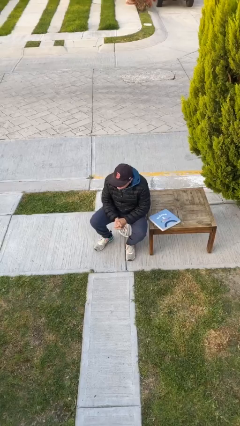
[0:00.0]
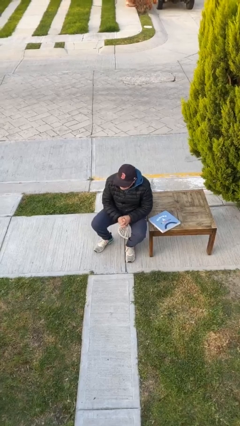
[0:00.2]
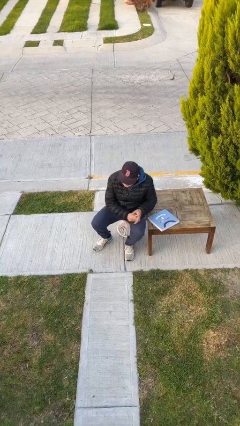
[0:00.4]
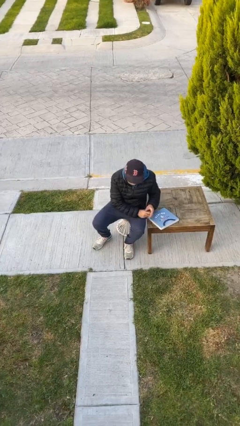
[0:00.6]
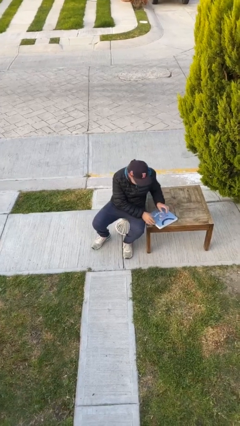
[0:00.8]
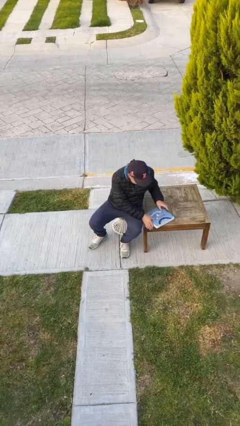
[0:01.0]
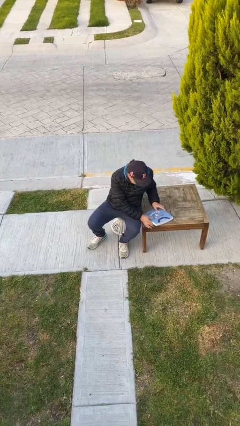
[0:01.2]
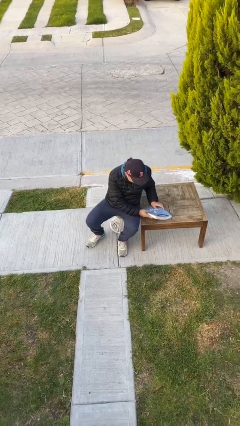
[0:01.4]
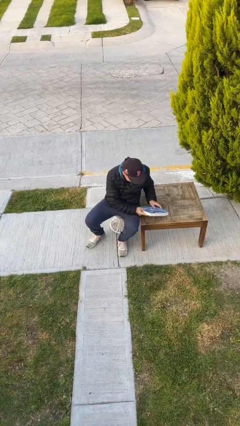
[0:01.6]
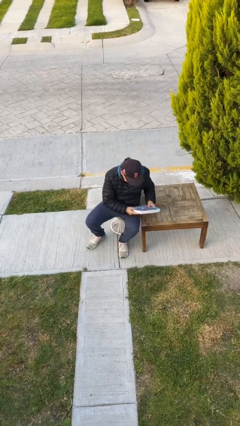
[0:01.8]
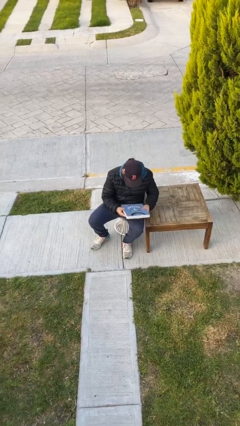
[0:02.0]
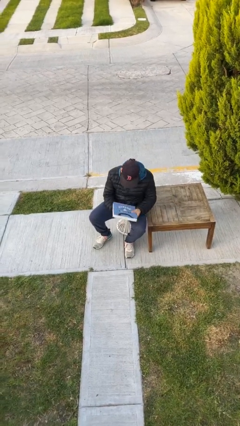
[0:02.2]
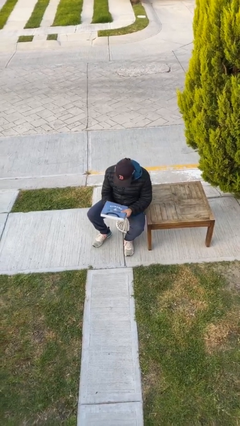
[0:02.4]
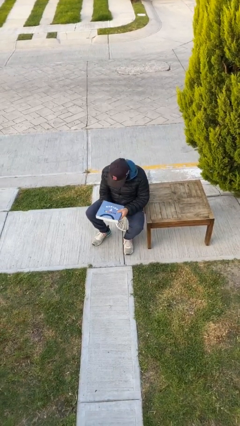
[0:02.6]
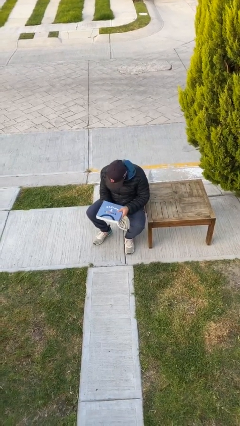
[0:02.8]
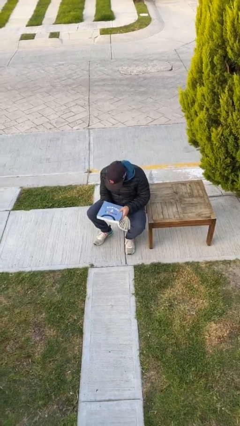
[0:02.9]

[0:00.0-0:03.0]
person picks up object from table

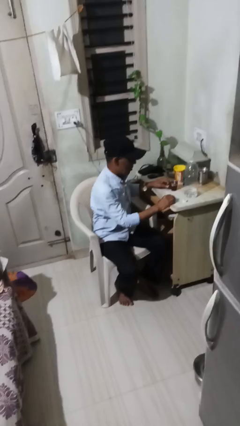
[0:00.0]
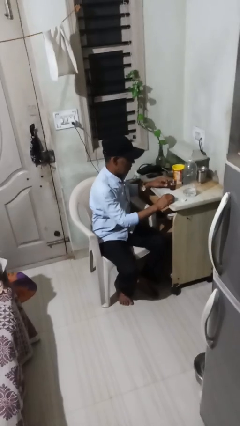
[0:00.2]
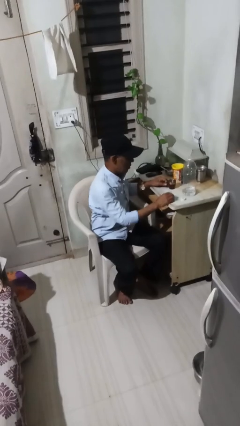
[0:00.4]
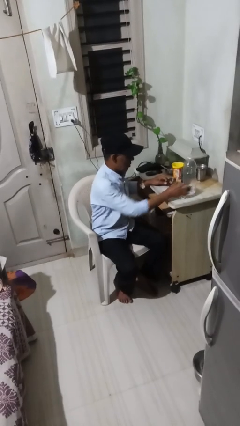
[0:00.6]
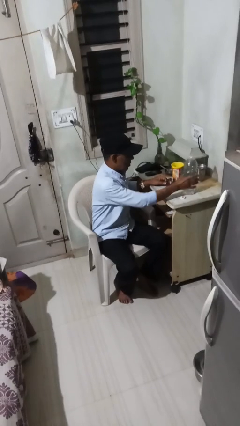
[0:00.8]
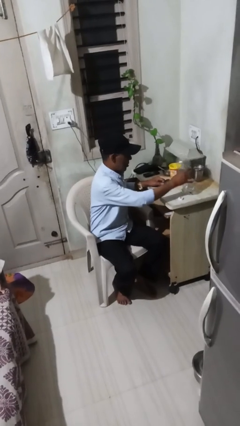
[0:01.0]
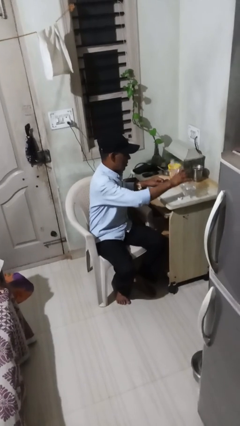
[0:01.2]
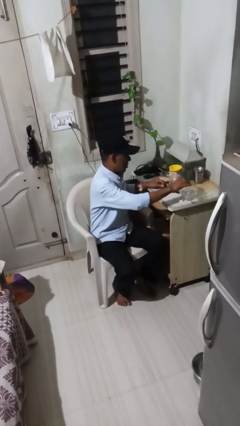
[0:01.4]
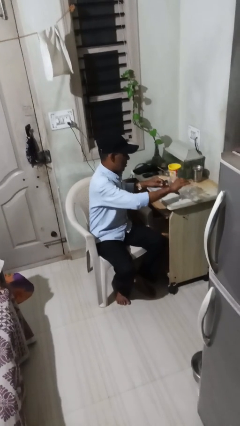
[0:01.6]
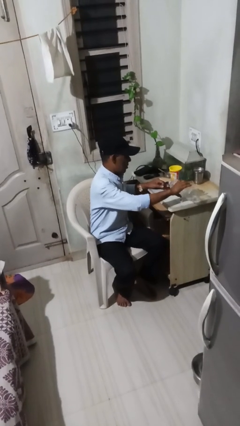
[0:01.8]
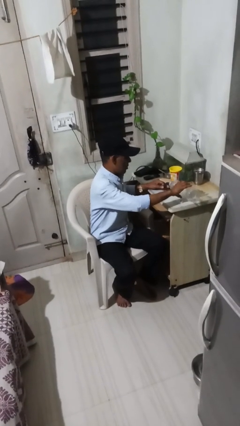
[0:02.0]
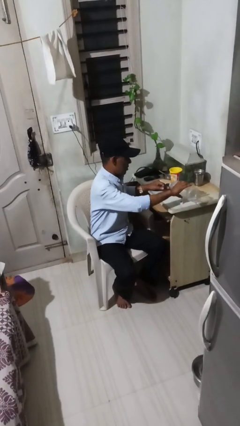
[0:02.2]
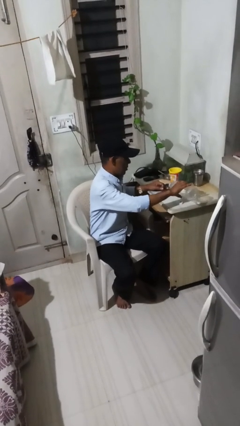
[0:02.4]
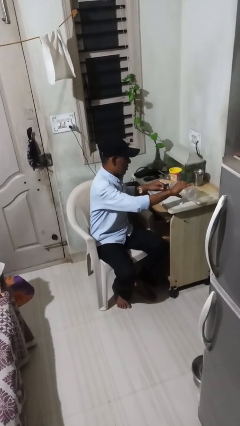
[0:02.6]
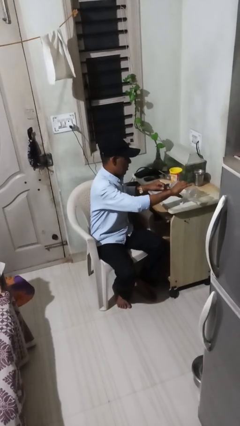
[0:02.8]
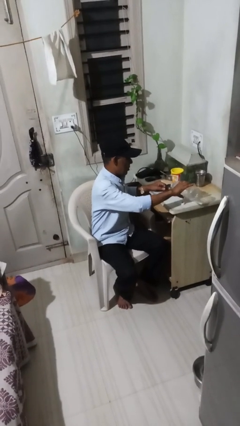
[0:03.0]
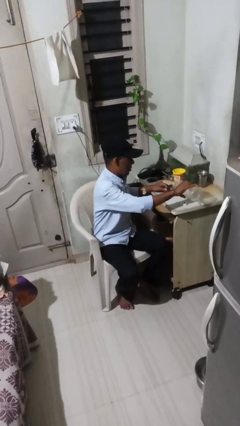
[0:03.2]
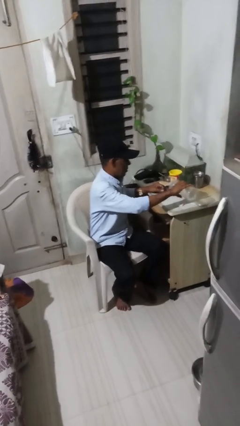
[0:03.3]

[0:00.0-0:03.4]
person pours liquid into cup

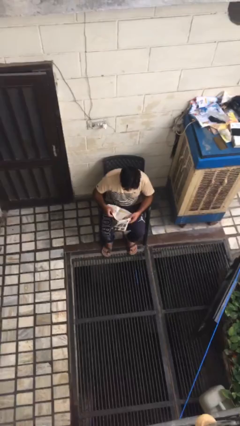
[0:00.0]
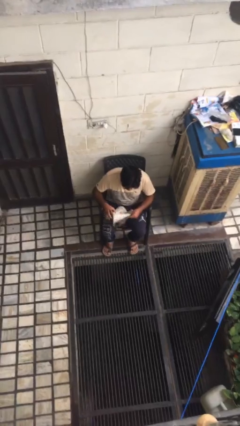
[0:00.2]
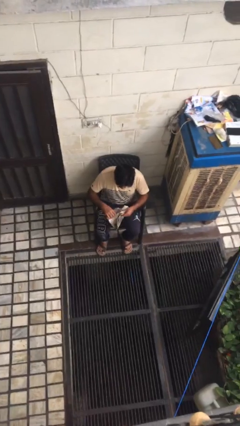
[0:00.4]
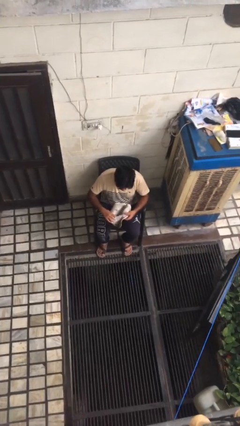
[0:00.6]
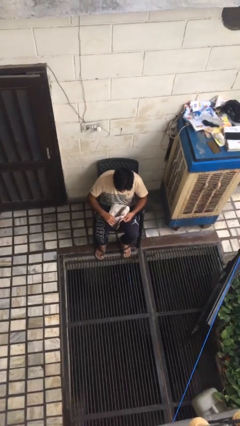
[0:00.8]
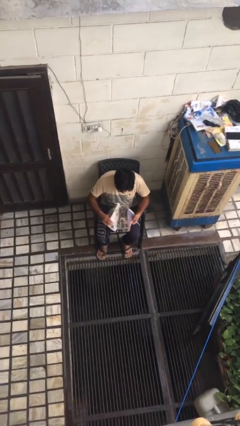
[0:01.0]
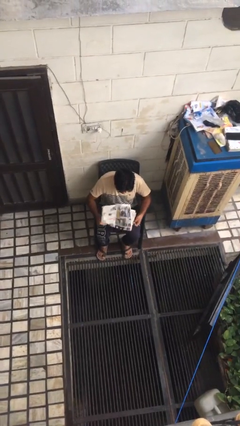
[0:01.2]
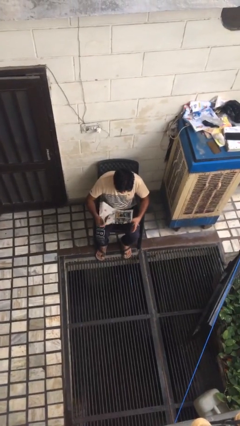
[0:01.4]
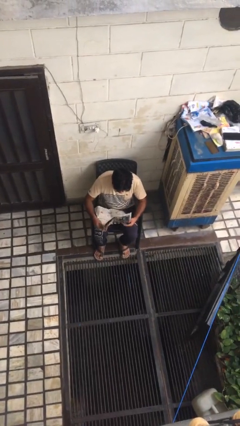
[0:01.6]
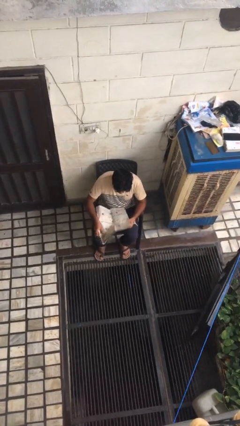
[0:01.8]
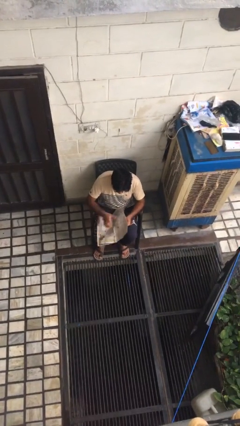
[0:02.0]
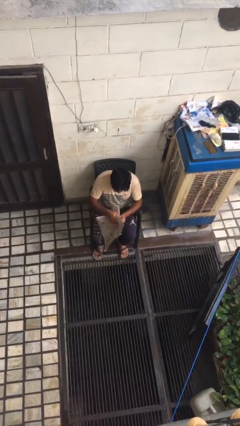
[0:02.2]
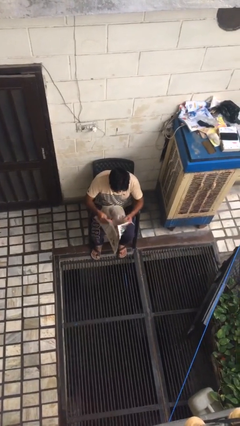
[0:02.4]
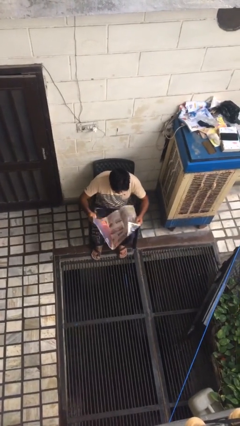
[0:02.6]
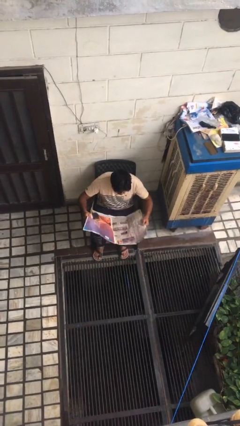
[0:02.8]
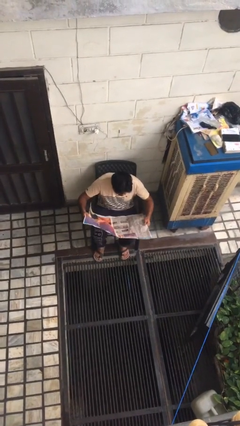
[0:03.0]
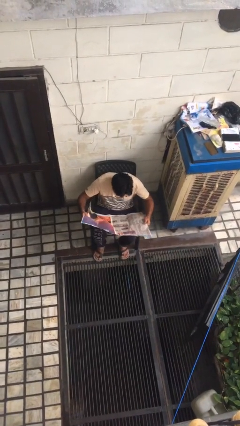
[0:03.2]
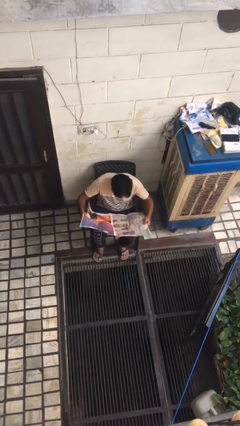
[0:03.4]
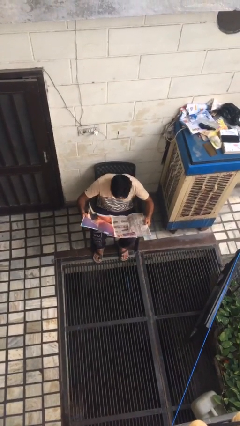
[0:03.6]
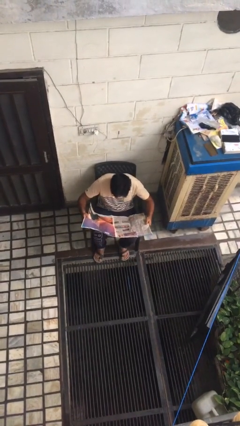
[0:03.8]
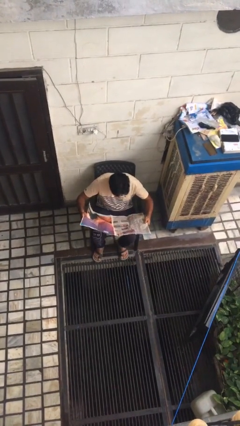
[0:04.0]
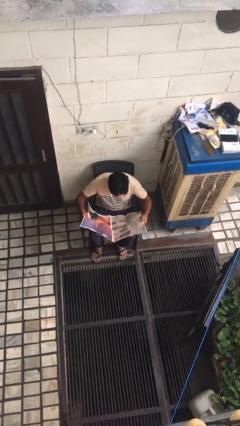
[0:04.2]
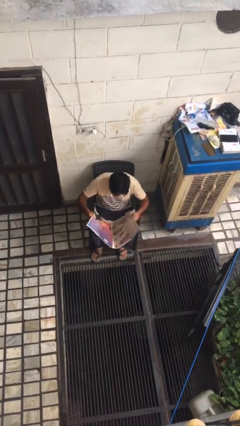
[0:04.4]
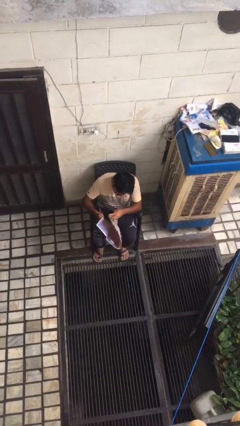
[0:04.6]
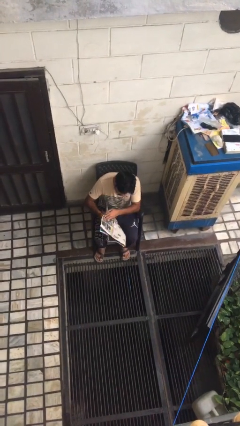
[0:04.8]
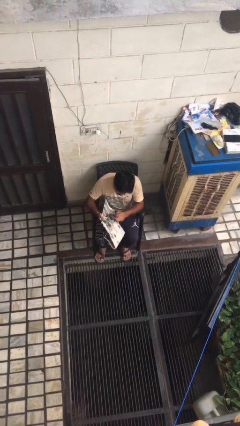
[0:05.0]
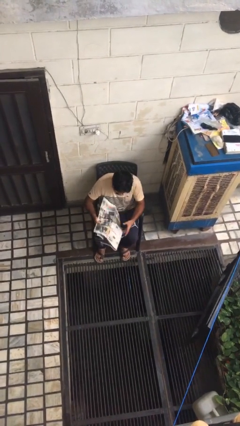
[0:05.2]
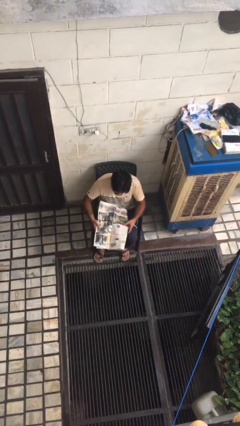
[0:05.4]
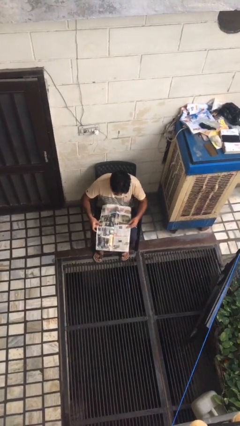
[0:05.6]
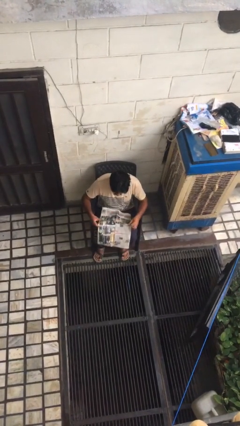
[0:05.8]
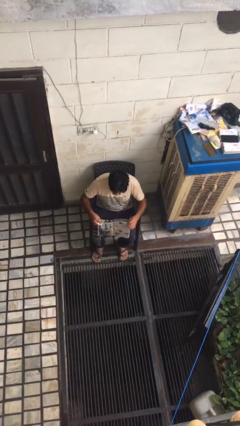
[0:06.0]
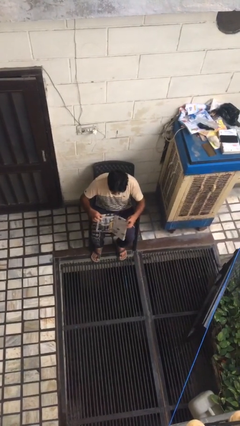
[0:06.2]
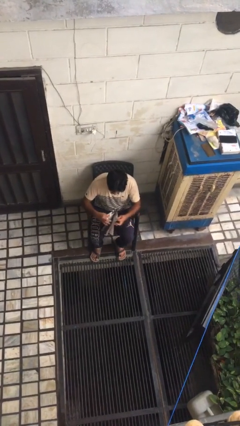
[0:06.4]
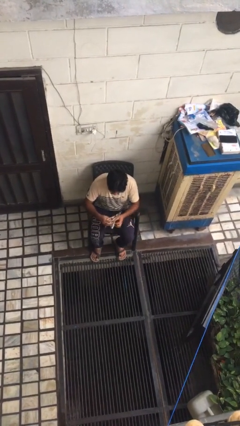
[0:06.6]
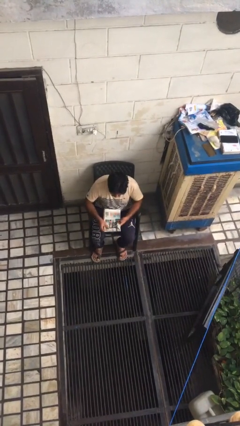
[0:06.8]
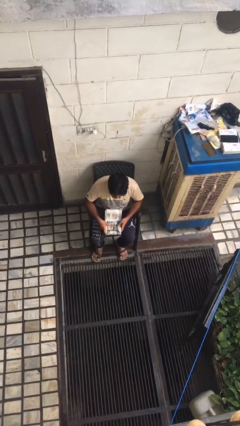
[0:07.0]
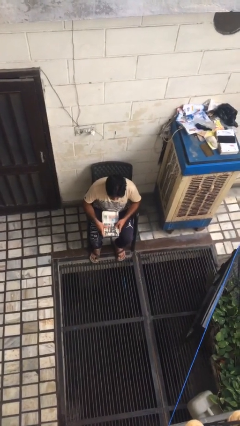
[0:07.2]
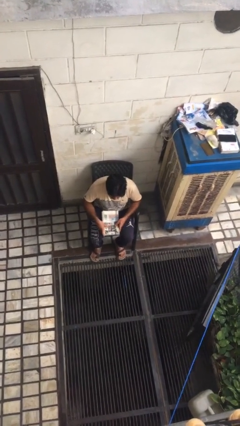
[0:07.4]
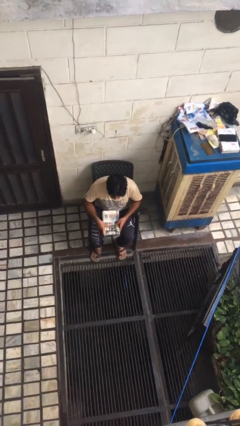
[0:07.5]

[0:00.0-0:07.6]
person reads newspaper

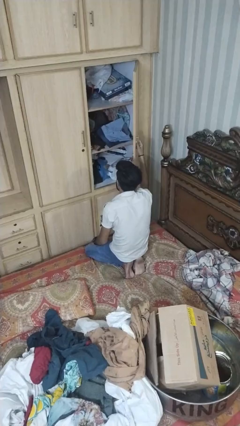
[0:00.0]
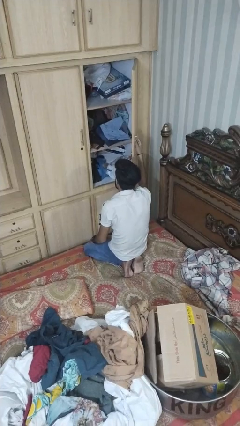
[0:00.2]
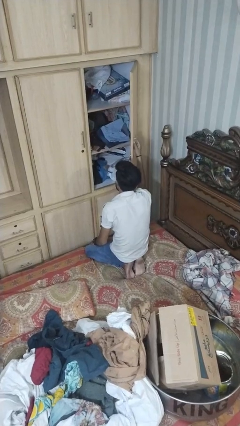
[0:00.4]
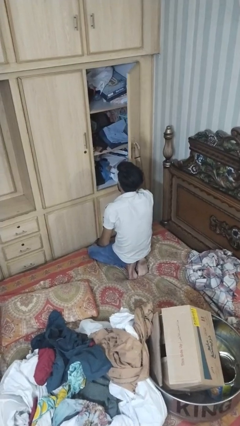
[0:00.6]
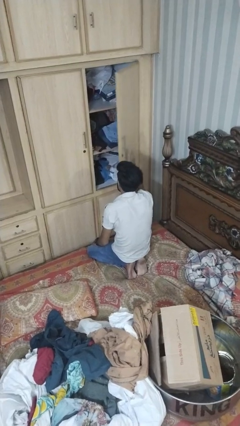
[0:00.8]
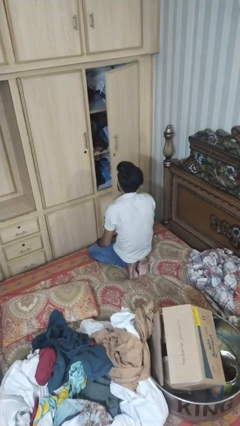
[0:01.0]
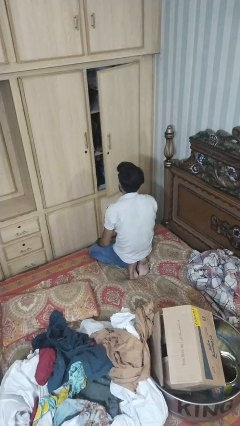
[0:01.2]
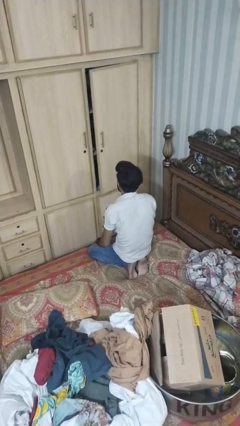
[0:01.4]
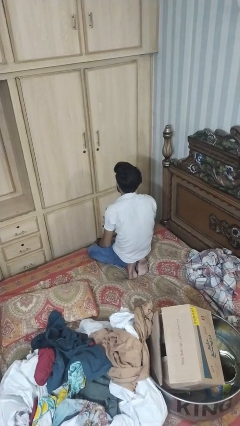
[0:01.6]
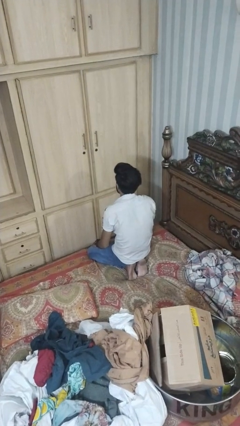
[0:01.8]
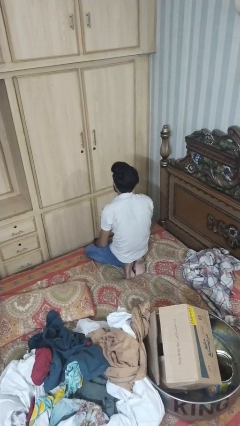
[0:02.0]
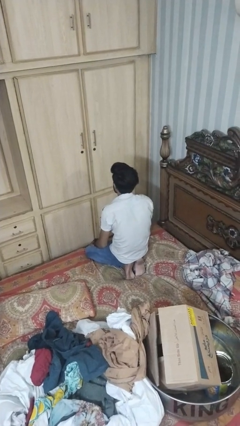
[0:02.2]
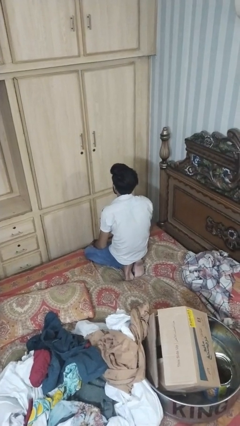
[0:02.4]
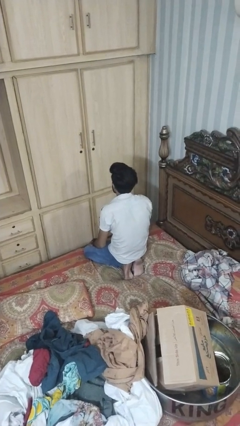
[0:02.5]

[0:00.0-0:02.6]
person closes dresser drawer

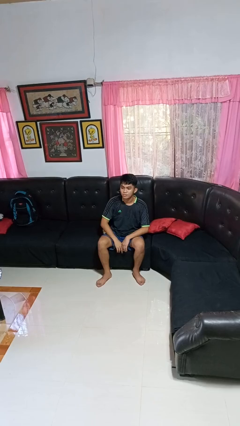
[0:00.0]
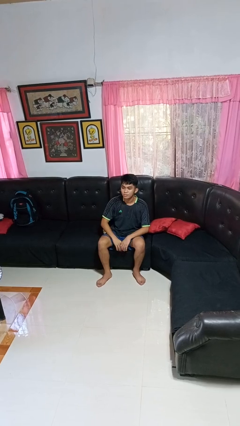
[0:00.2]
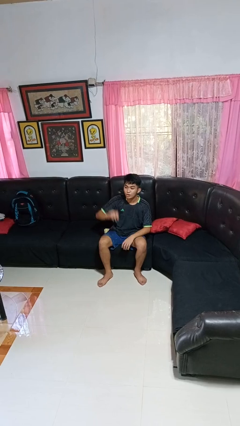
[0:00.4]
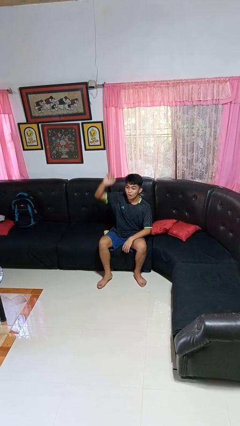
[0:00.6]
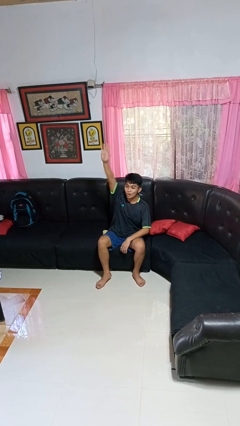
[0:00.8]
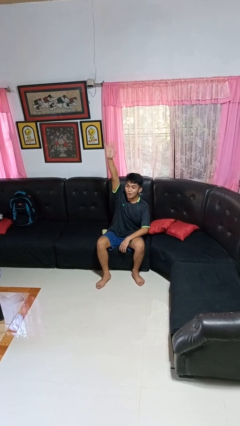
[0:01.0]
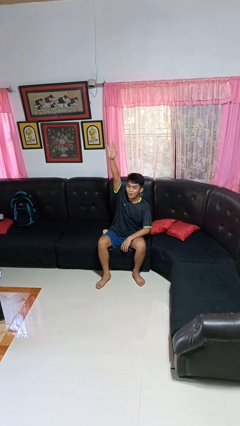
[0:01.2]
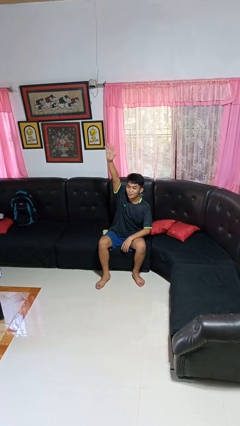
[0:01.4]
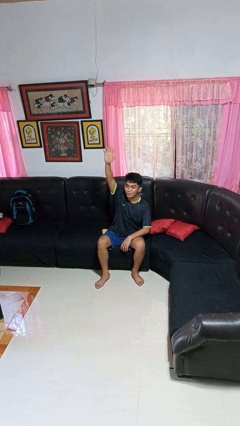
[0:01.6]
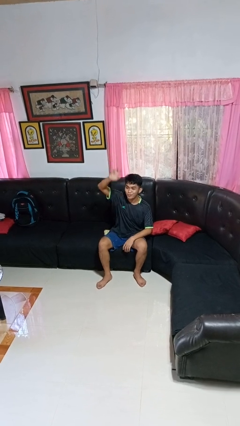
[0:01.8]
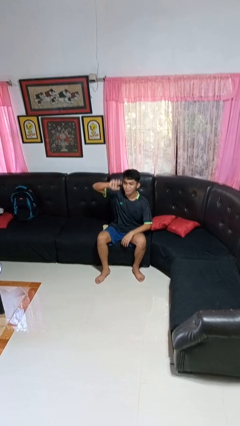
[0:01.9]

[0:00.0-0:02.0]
person gestures raise hand
